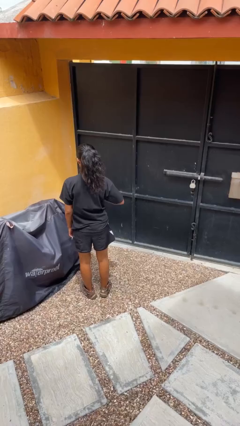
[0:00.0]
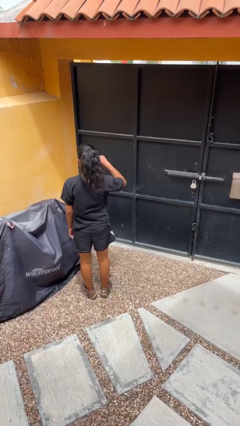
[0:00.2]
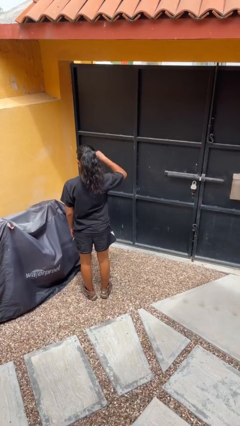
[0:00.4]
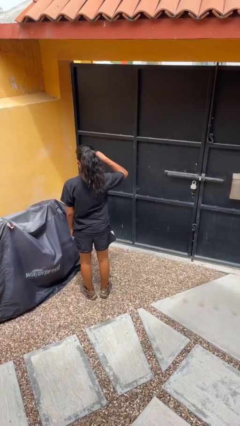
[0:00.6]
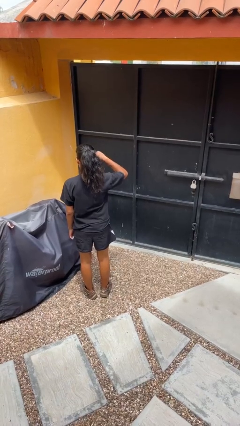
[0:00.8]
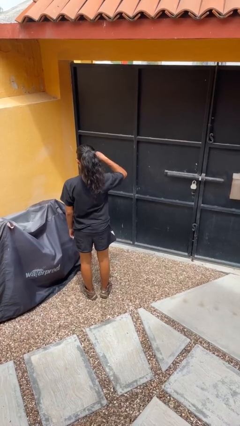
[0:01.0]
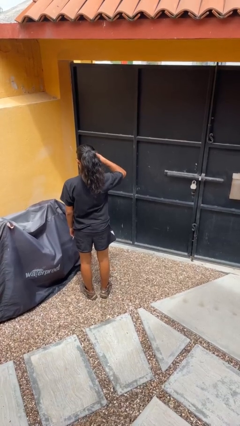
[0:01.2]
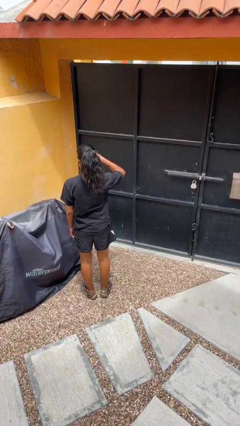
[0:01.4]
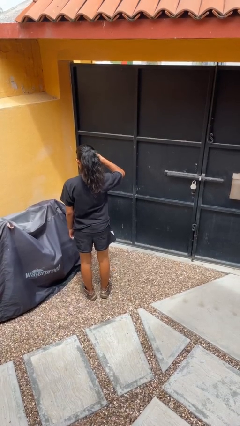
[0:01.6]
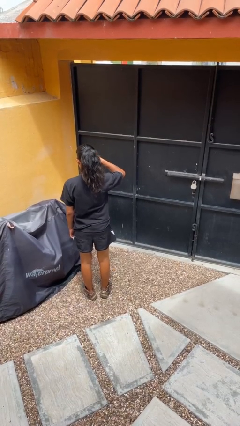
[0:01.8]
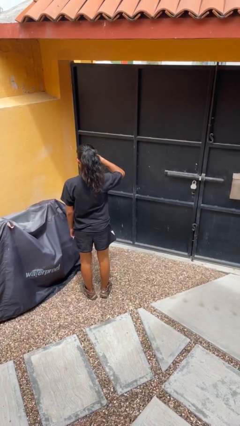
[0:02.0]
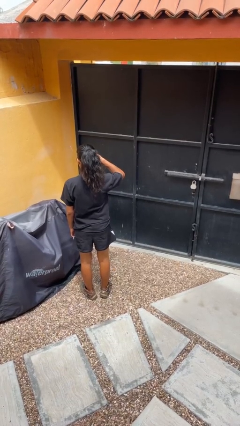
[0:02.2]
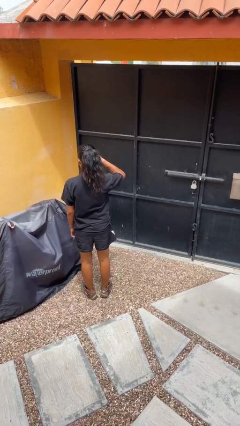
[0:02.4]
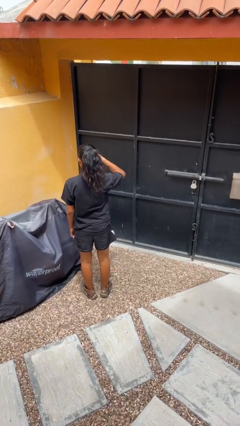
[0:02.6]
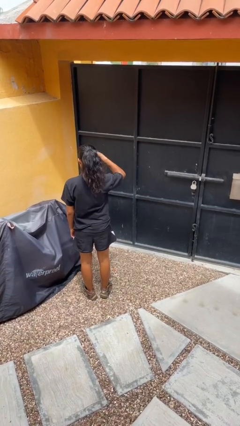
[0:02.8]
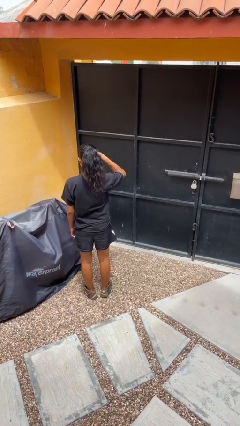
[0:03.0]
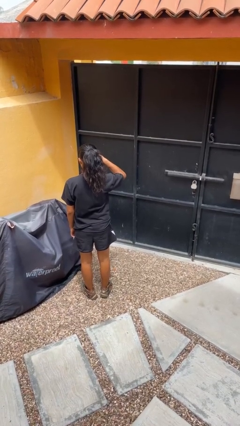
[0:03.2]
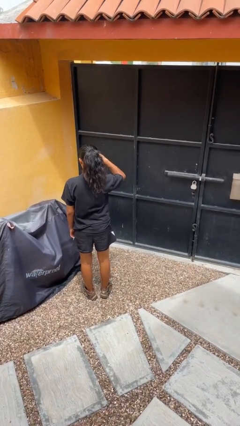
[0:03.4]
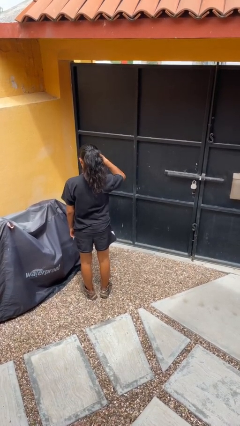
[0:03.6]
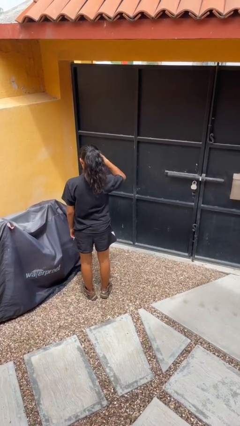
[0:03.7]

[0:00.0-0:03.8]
person gestures thumbs down

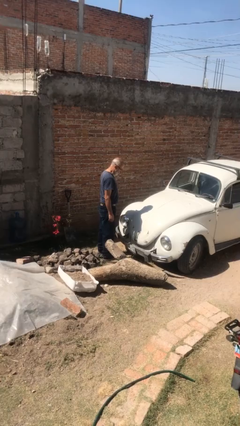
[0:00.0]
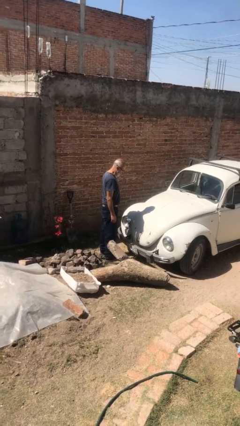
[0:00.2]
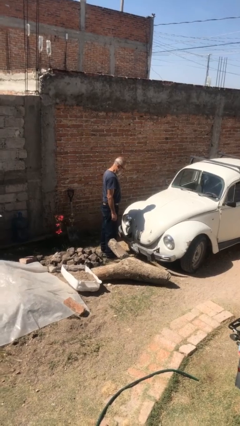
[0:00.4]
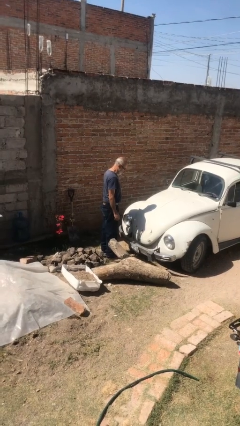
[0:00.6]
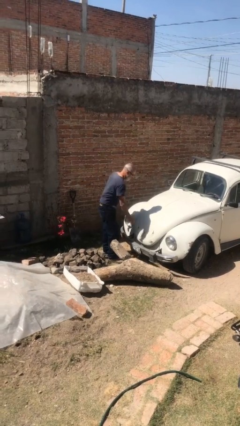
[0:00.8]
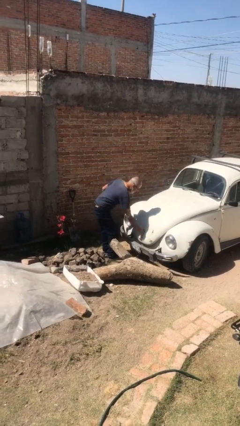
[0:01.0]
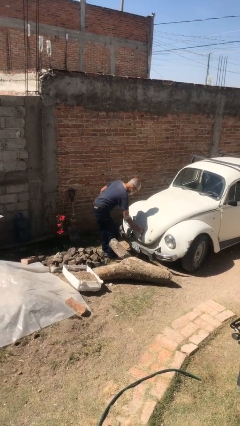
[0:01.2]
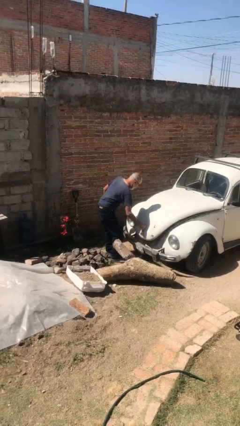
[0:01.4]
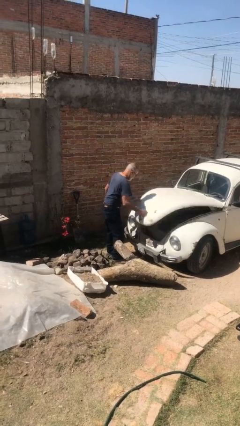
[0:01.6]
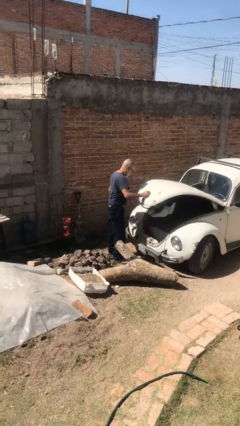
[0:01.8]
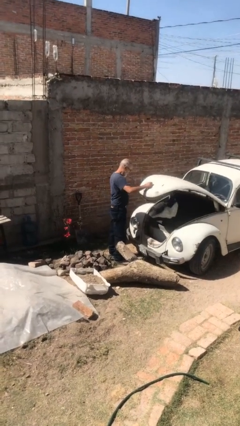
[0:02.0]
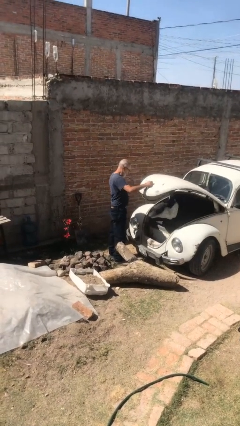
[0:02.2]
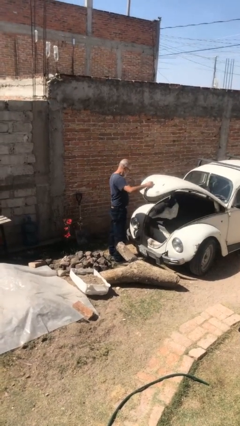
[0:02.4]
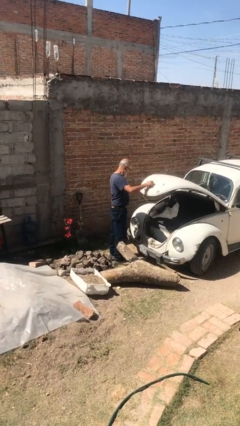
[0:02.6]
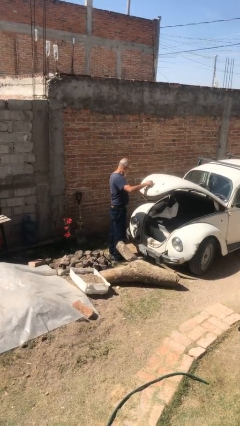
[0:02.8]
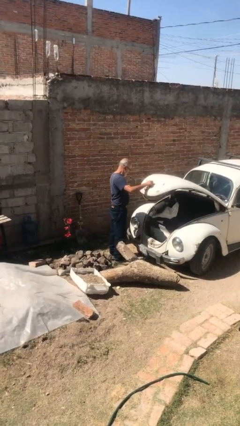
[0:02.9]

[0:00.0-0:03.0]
person opens car trunk

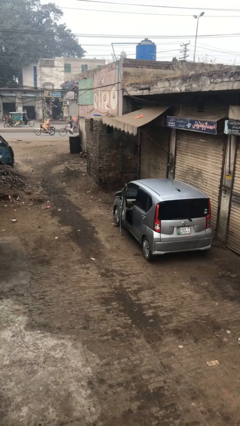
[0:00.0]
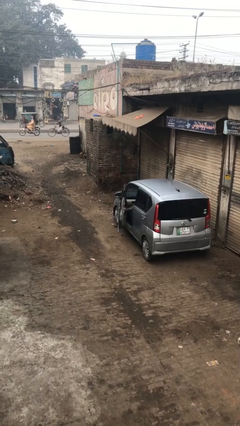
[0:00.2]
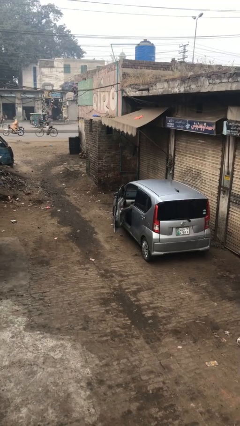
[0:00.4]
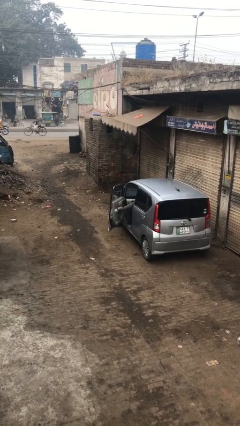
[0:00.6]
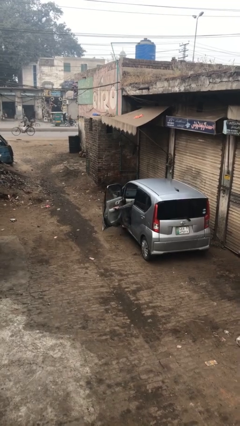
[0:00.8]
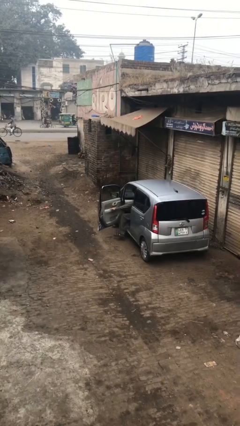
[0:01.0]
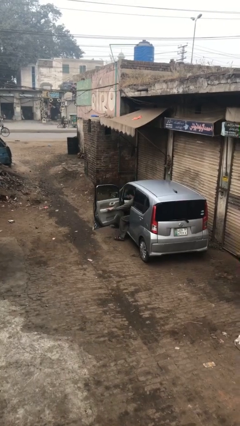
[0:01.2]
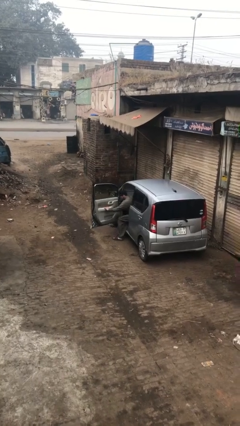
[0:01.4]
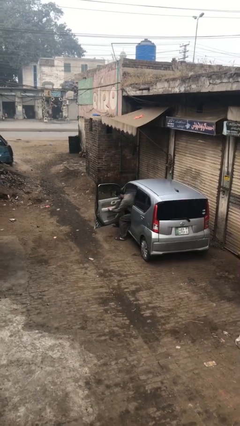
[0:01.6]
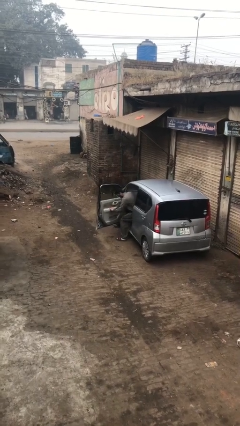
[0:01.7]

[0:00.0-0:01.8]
person opens car door

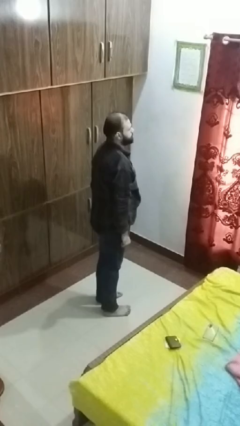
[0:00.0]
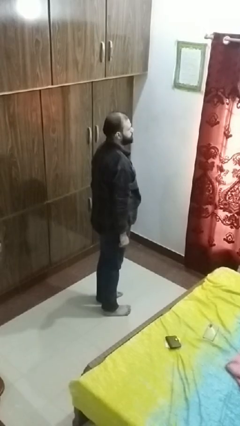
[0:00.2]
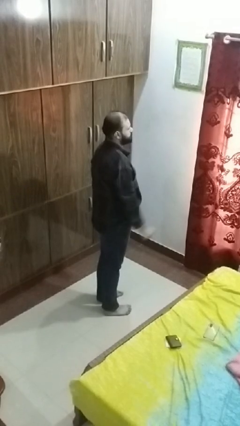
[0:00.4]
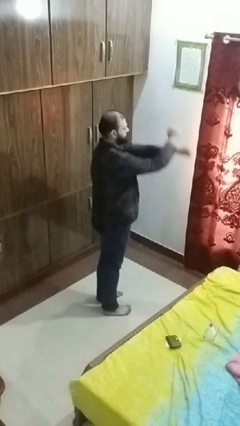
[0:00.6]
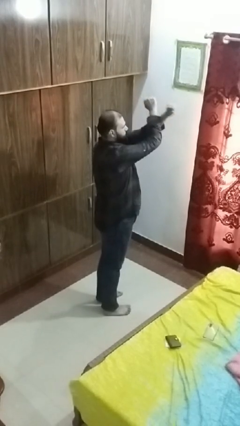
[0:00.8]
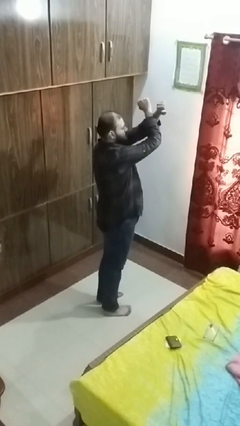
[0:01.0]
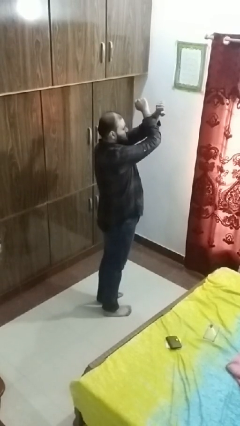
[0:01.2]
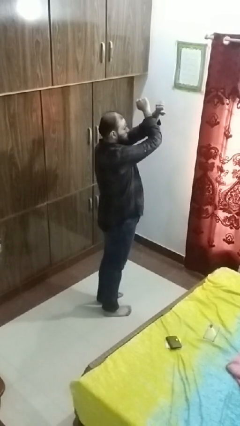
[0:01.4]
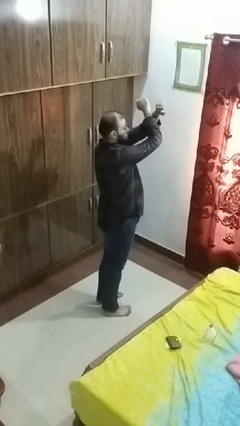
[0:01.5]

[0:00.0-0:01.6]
person gestures arms x

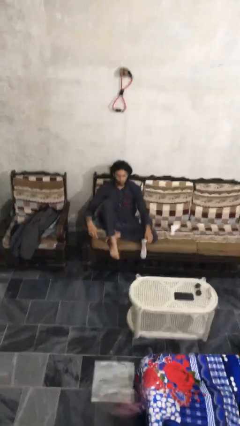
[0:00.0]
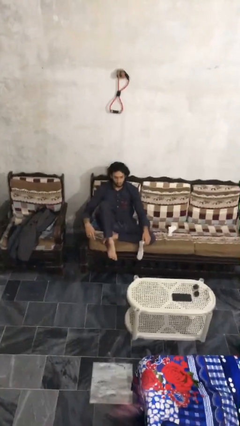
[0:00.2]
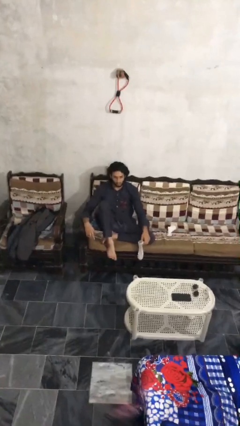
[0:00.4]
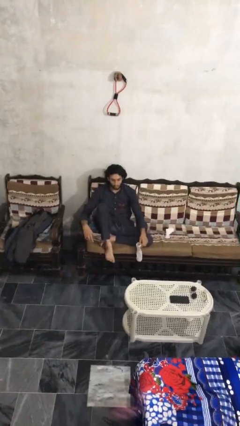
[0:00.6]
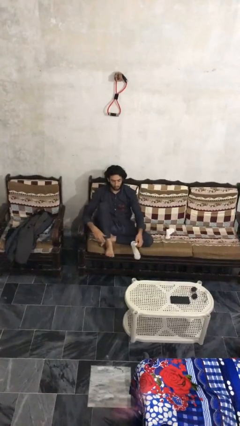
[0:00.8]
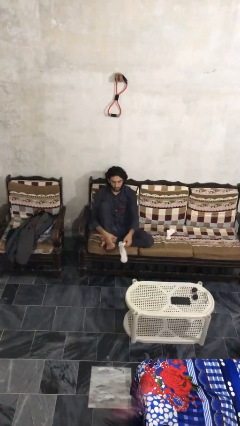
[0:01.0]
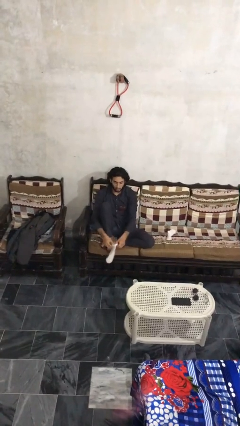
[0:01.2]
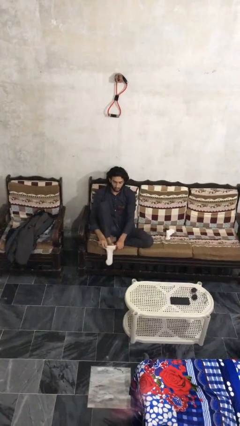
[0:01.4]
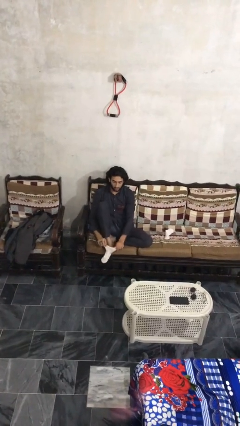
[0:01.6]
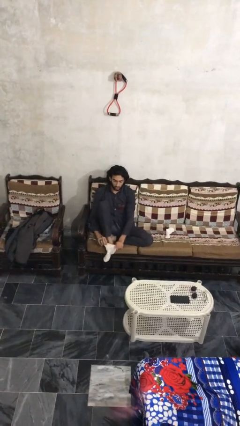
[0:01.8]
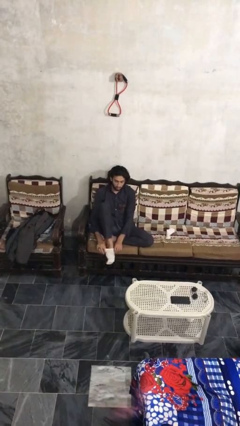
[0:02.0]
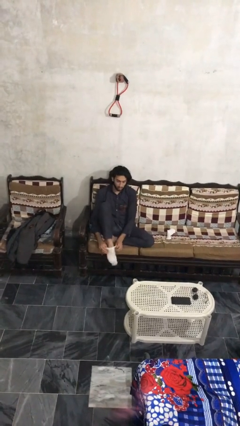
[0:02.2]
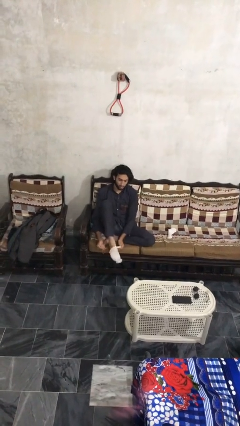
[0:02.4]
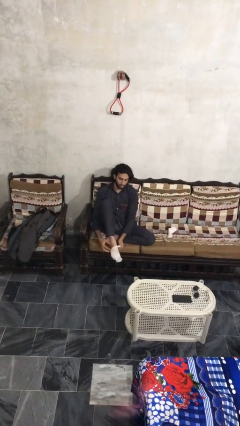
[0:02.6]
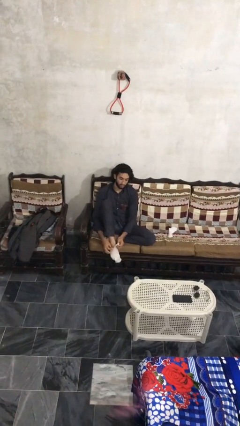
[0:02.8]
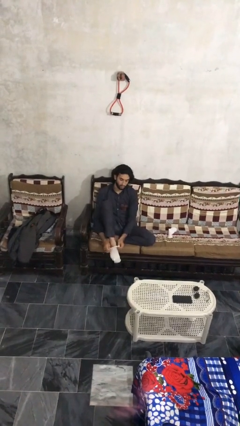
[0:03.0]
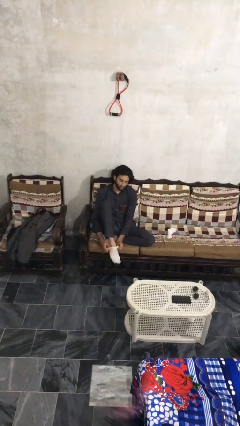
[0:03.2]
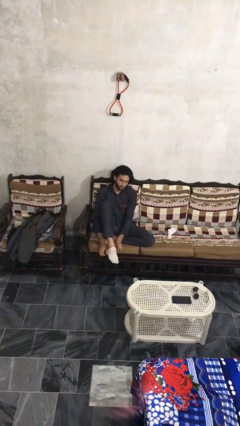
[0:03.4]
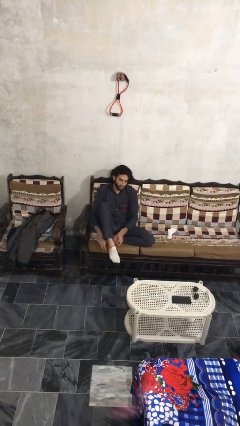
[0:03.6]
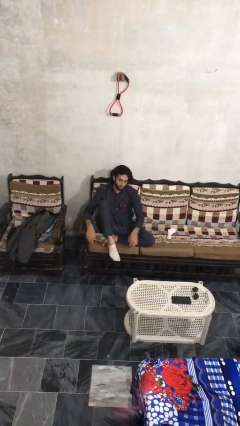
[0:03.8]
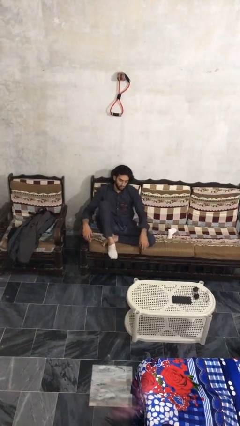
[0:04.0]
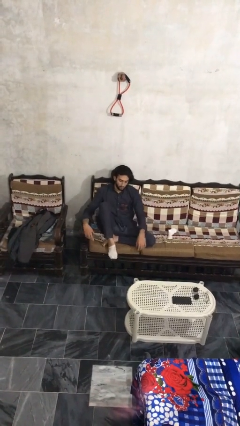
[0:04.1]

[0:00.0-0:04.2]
person puts on socks

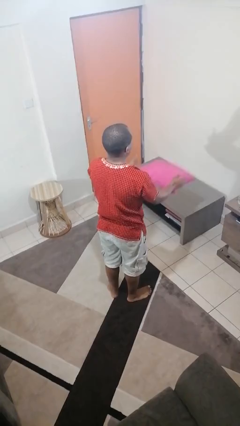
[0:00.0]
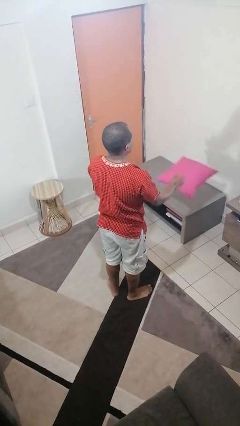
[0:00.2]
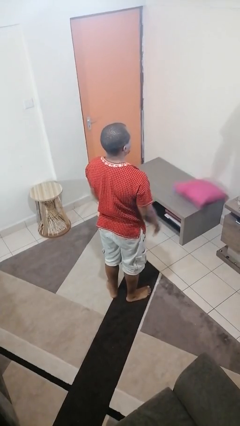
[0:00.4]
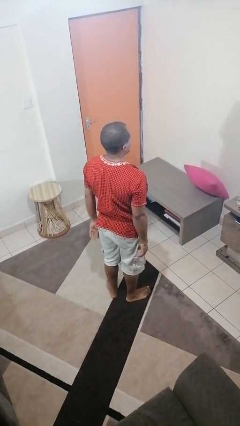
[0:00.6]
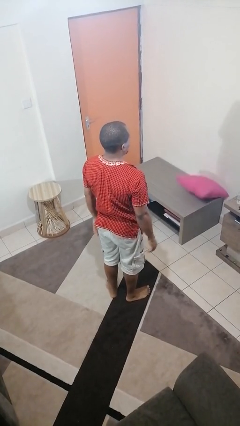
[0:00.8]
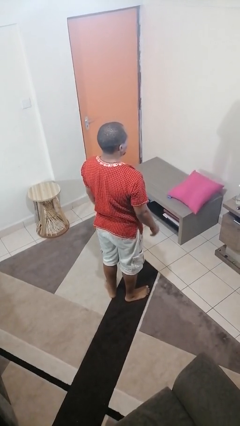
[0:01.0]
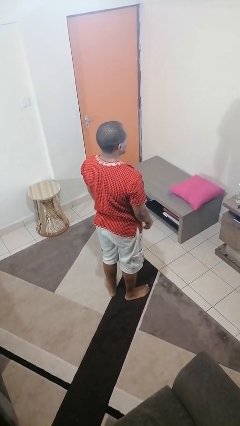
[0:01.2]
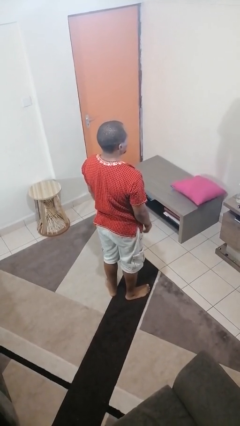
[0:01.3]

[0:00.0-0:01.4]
person throws object on table

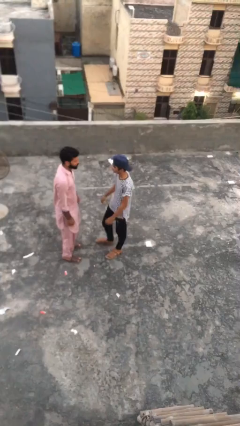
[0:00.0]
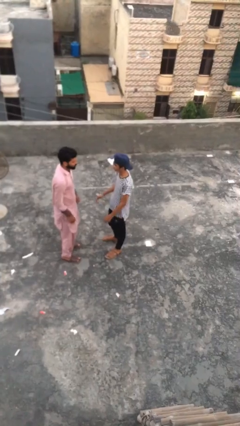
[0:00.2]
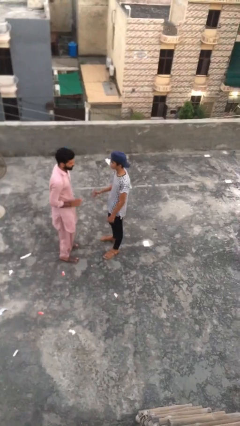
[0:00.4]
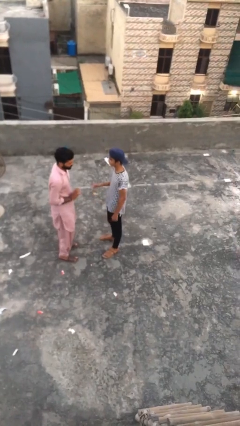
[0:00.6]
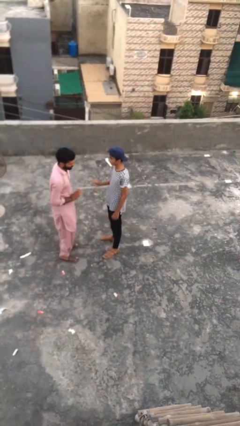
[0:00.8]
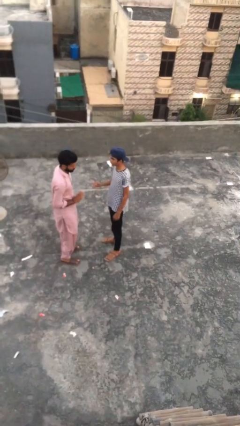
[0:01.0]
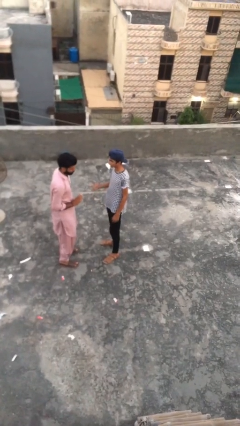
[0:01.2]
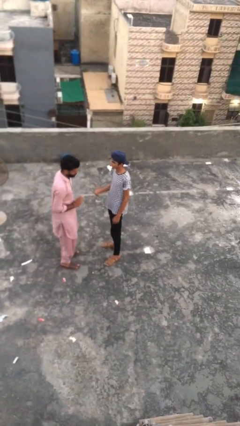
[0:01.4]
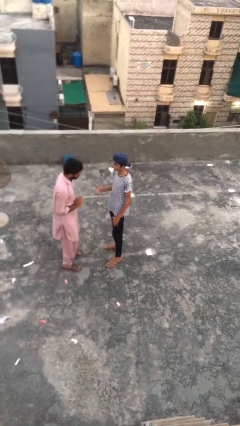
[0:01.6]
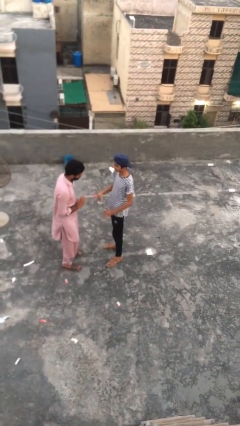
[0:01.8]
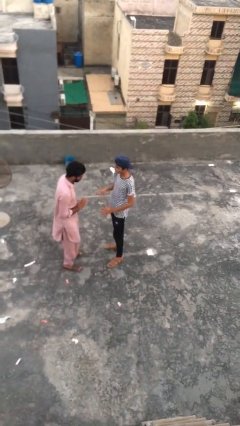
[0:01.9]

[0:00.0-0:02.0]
person talks to person
